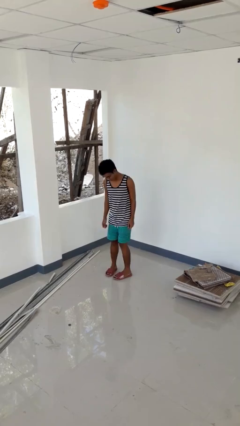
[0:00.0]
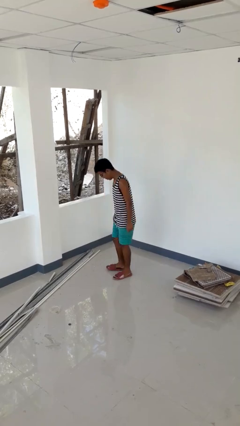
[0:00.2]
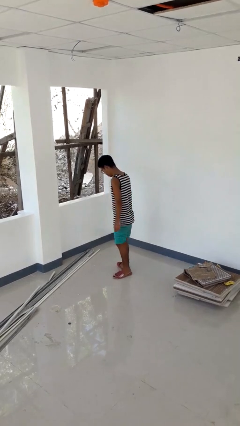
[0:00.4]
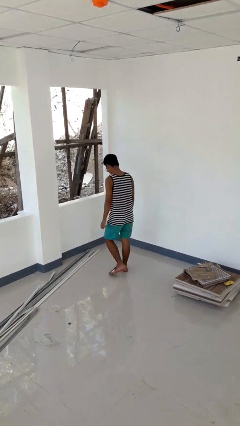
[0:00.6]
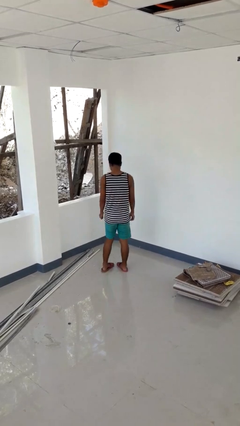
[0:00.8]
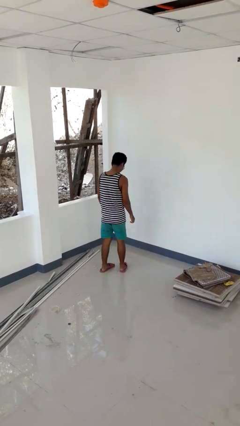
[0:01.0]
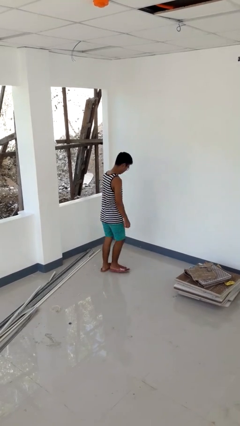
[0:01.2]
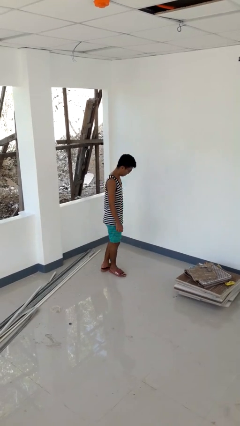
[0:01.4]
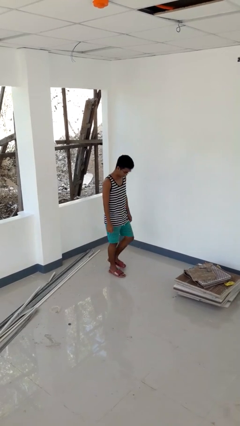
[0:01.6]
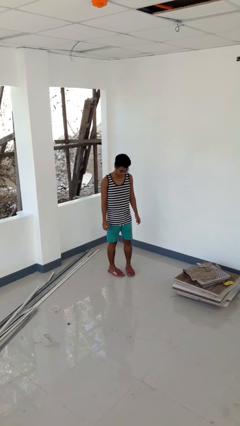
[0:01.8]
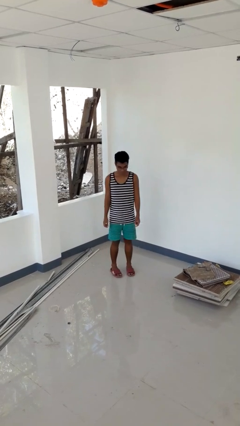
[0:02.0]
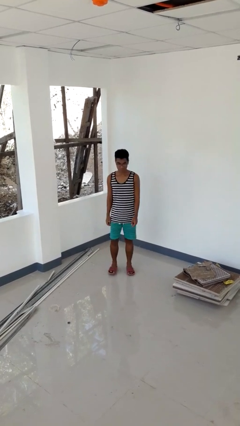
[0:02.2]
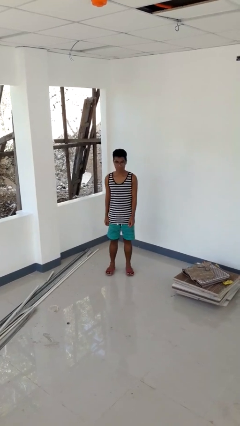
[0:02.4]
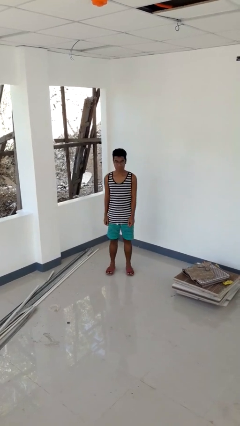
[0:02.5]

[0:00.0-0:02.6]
person twirls

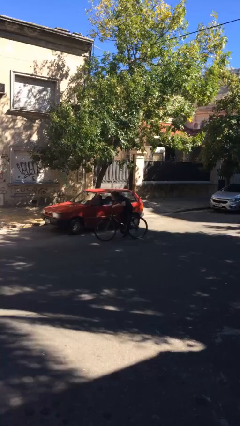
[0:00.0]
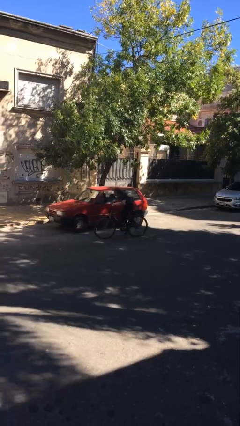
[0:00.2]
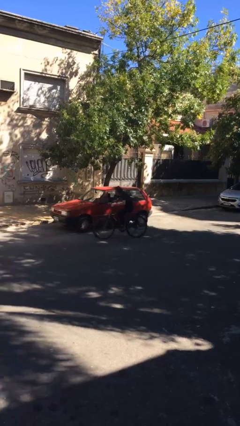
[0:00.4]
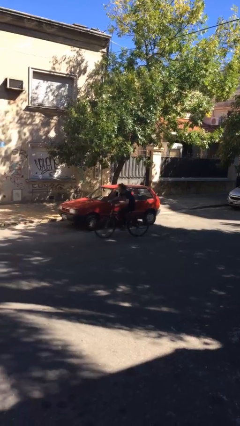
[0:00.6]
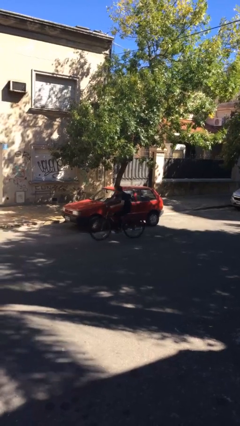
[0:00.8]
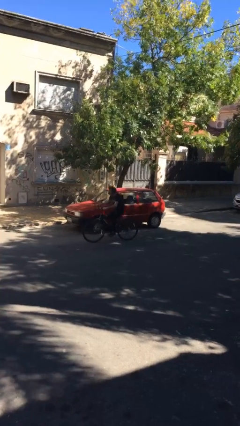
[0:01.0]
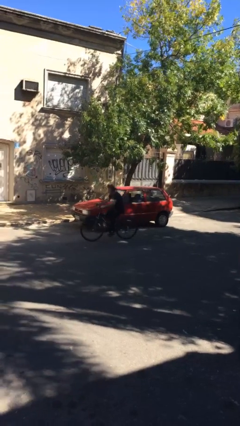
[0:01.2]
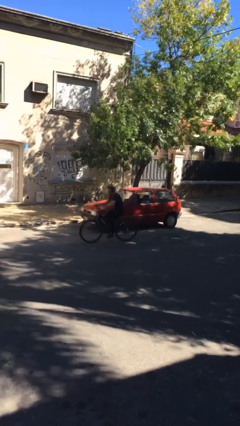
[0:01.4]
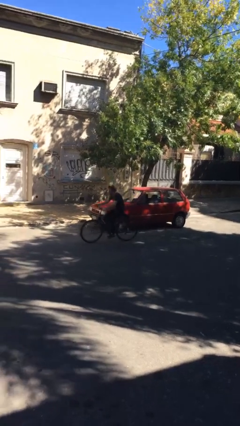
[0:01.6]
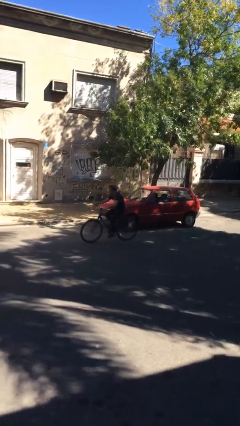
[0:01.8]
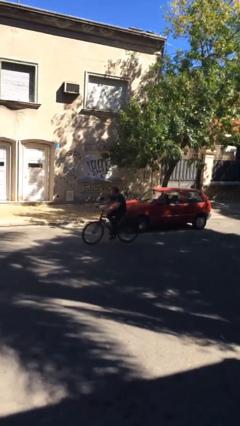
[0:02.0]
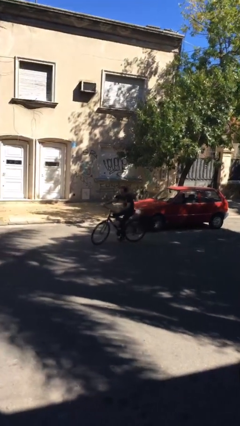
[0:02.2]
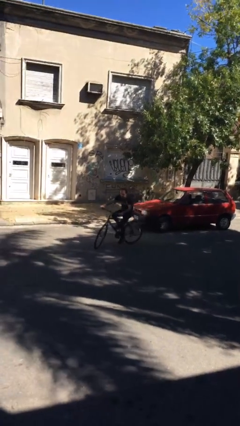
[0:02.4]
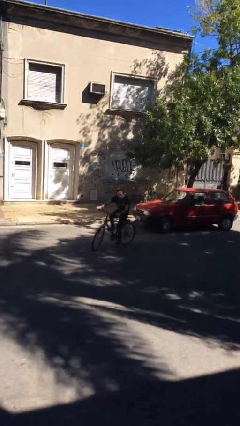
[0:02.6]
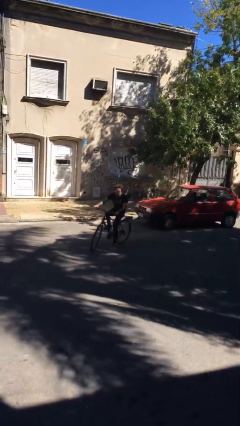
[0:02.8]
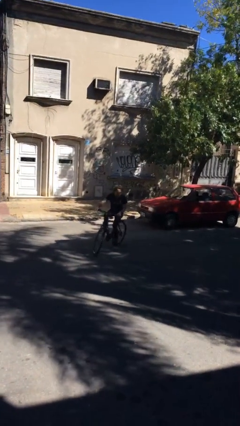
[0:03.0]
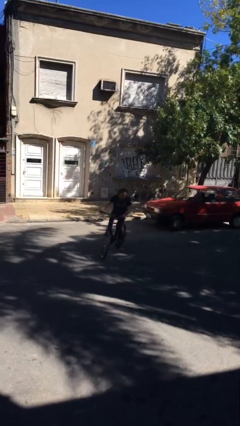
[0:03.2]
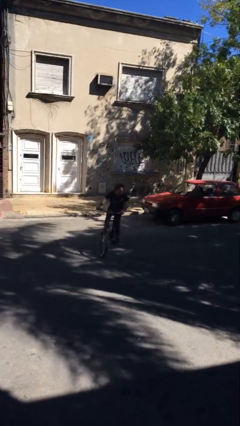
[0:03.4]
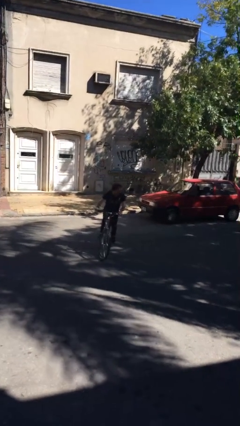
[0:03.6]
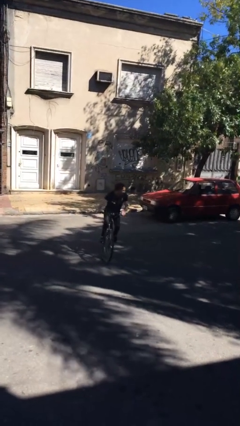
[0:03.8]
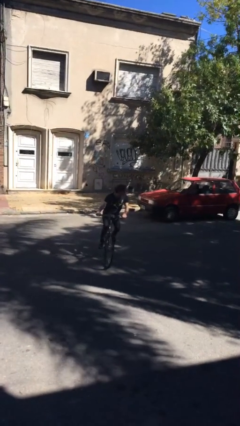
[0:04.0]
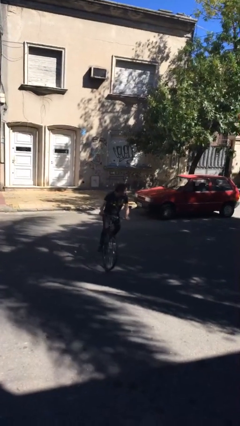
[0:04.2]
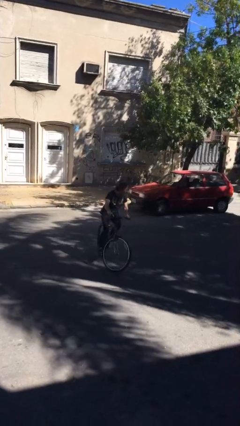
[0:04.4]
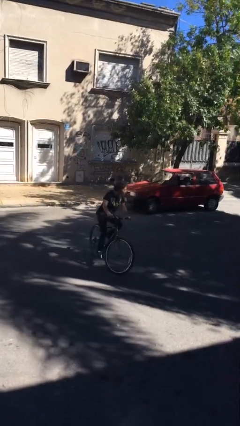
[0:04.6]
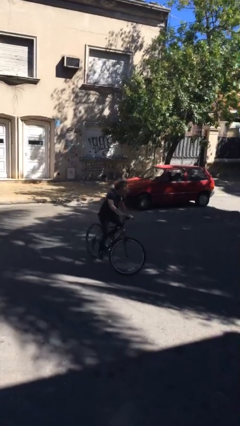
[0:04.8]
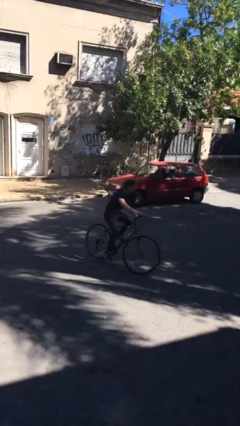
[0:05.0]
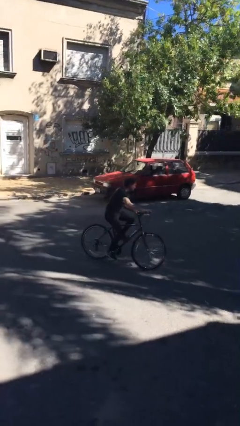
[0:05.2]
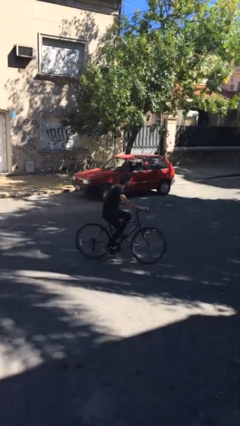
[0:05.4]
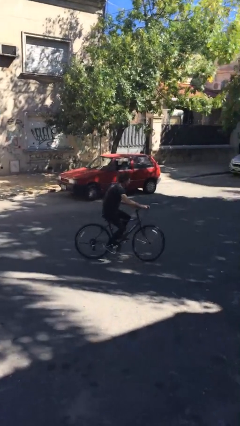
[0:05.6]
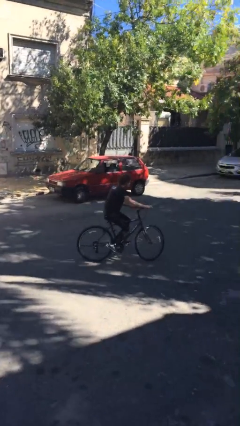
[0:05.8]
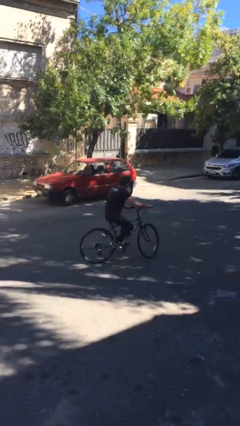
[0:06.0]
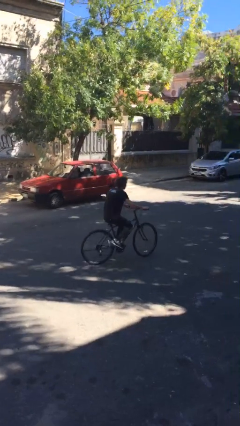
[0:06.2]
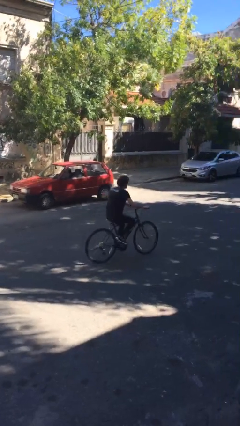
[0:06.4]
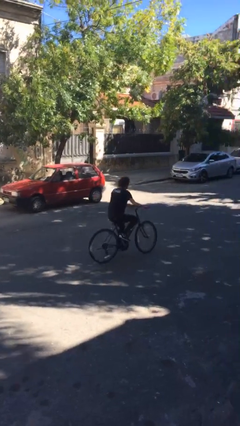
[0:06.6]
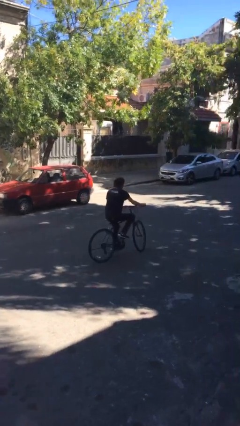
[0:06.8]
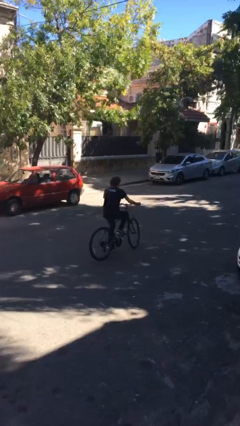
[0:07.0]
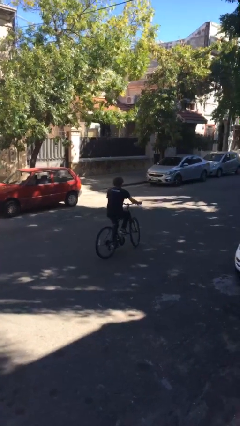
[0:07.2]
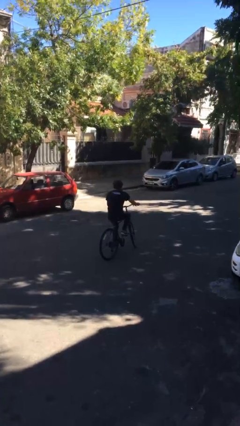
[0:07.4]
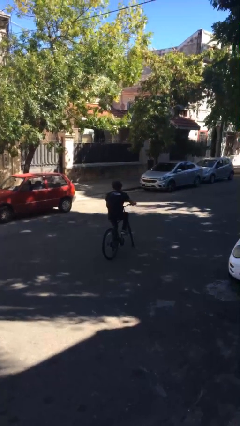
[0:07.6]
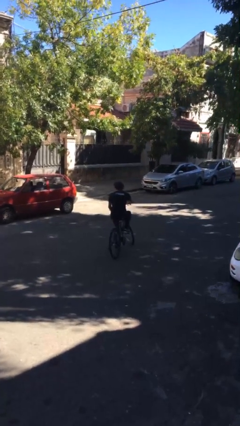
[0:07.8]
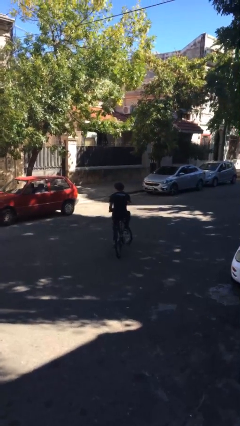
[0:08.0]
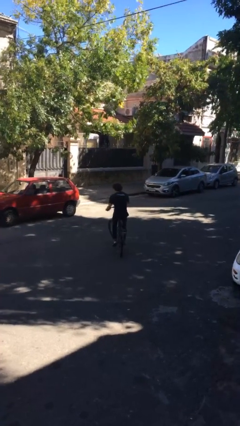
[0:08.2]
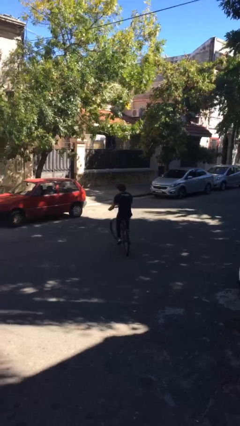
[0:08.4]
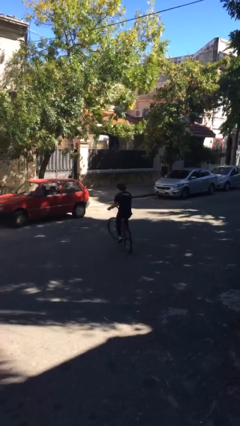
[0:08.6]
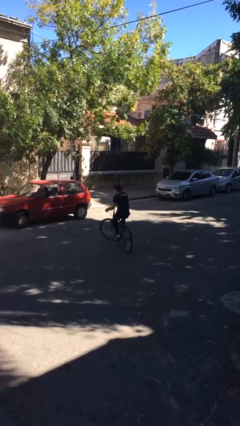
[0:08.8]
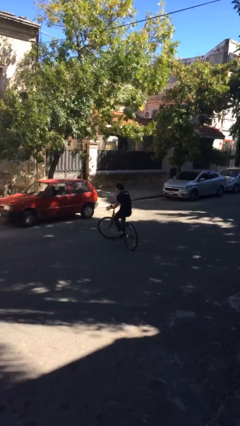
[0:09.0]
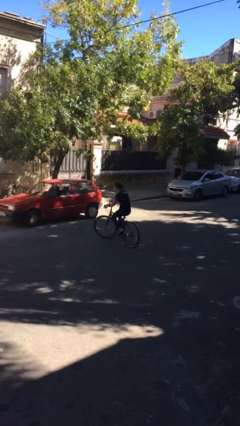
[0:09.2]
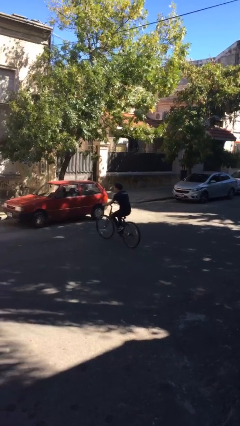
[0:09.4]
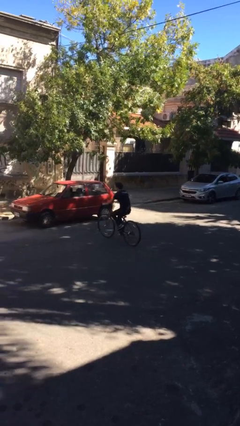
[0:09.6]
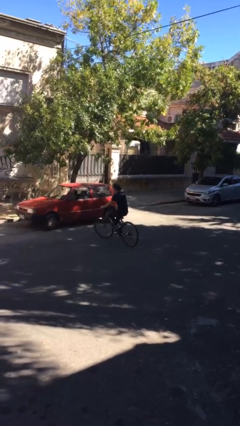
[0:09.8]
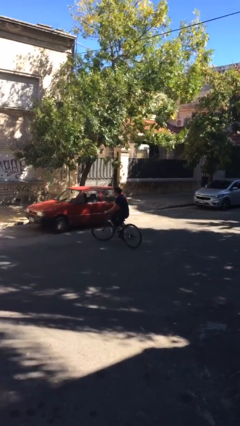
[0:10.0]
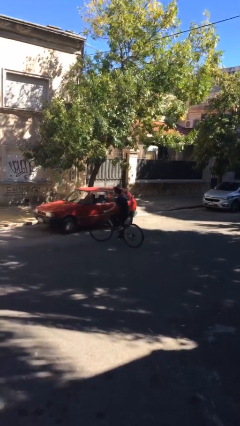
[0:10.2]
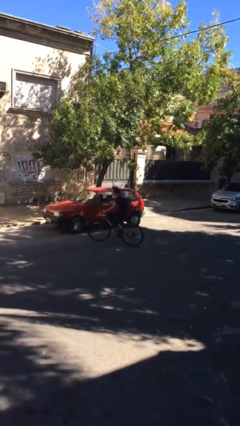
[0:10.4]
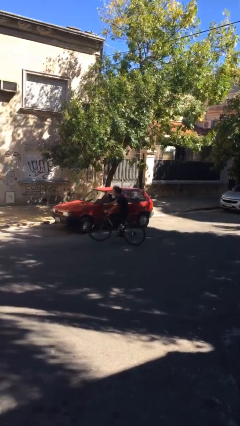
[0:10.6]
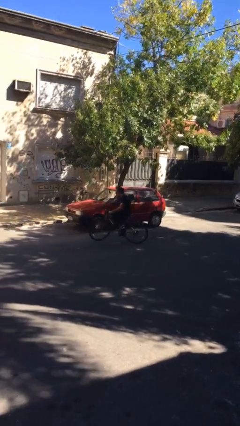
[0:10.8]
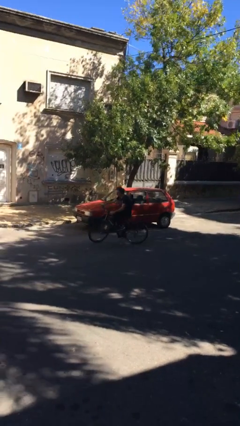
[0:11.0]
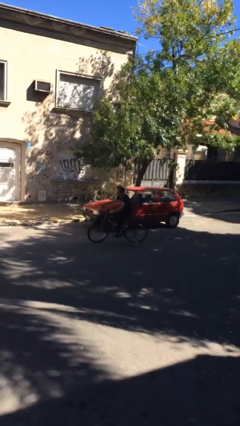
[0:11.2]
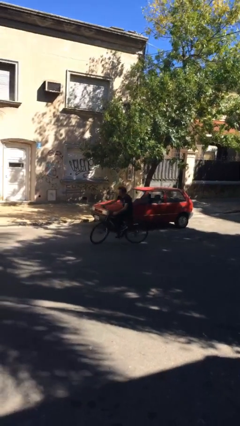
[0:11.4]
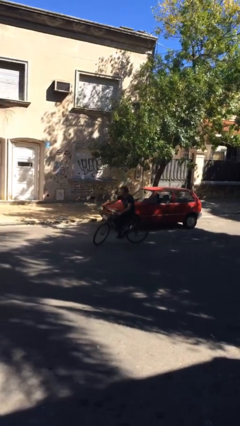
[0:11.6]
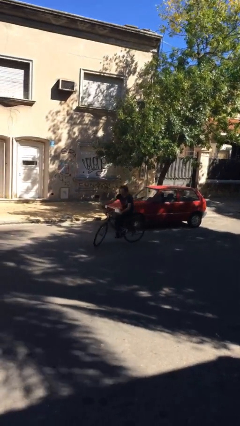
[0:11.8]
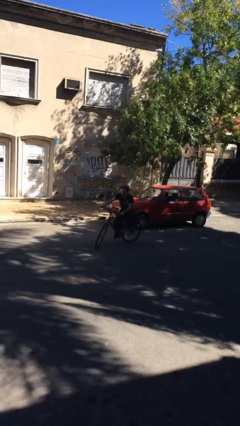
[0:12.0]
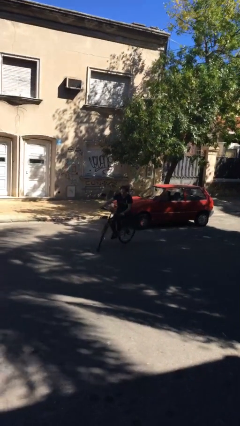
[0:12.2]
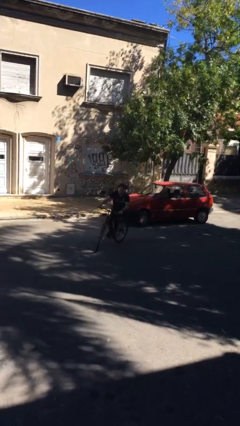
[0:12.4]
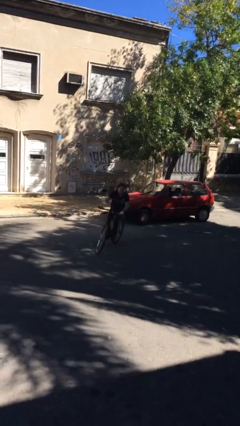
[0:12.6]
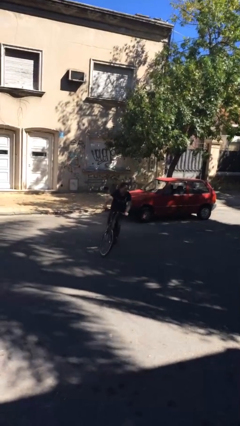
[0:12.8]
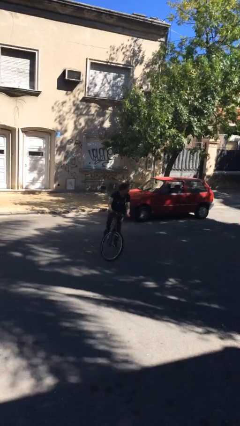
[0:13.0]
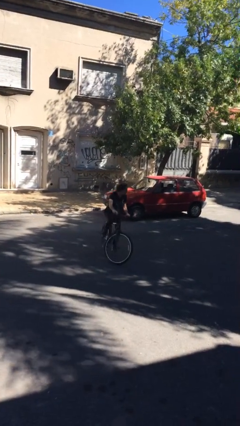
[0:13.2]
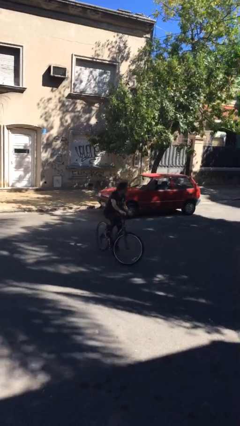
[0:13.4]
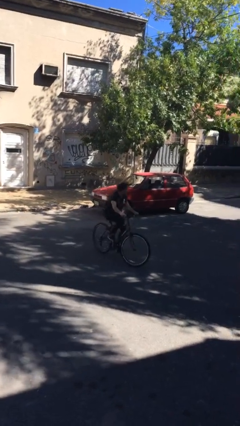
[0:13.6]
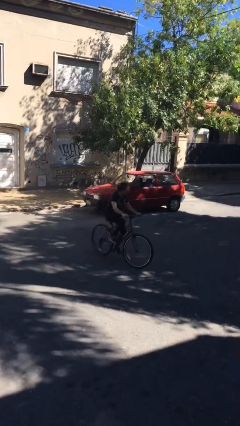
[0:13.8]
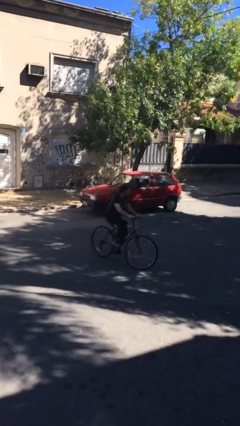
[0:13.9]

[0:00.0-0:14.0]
person rides bicycle

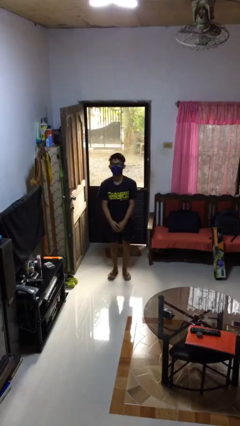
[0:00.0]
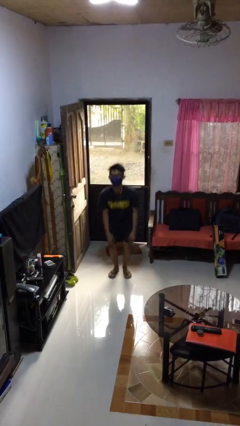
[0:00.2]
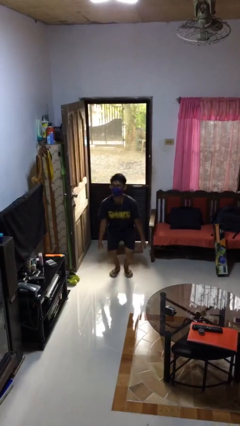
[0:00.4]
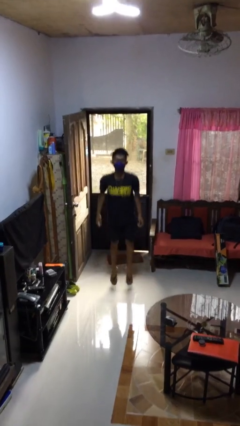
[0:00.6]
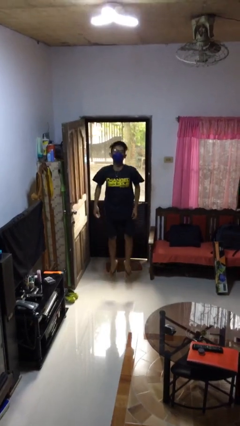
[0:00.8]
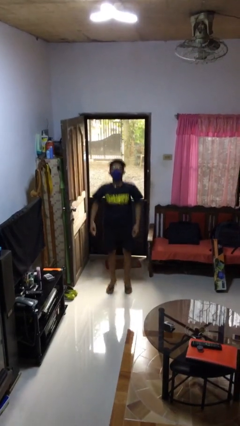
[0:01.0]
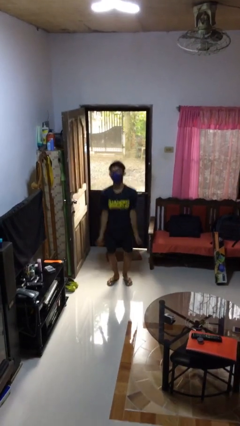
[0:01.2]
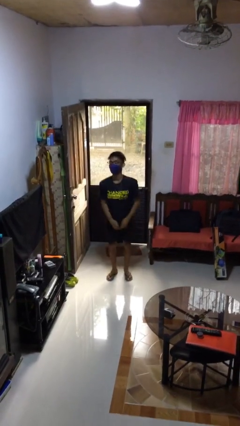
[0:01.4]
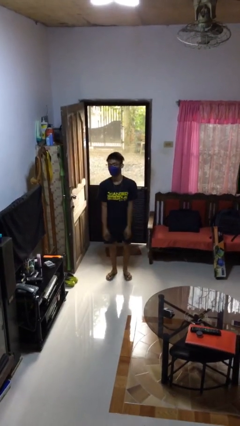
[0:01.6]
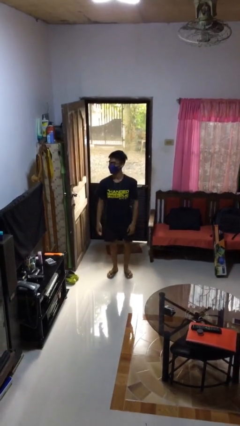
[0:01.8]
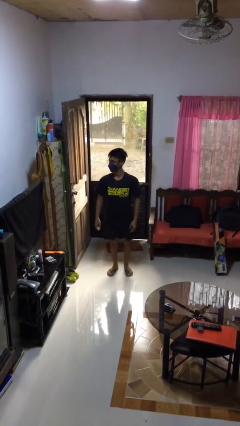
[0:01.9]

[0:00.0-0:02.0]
person jumps
